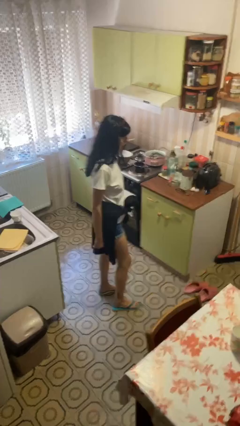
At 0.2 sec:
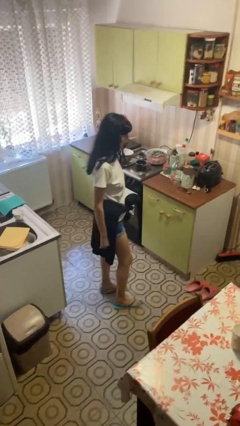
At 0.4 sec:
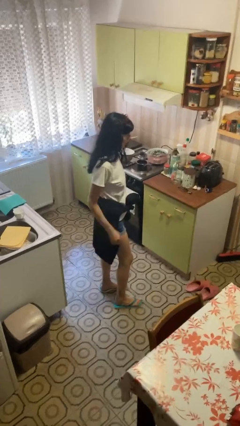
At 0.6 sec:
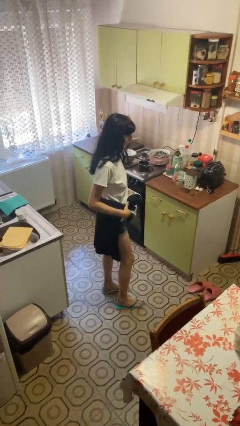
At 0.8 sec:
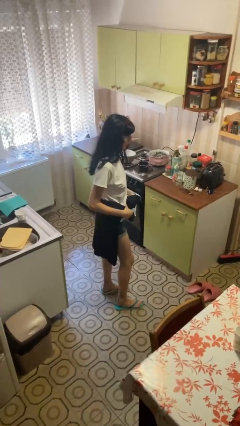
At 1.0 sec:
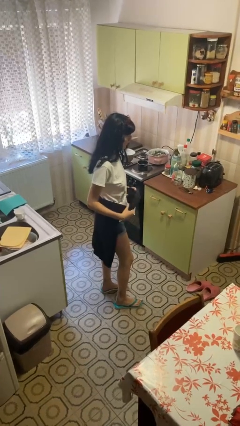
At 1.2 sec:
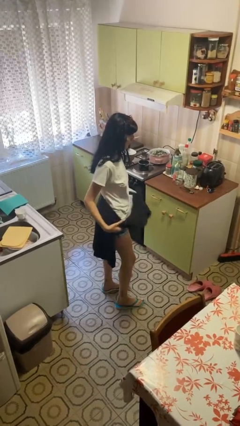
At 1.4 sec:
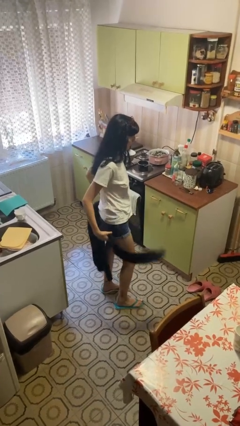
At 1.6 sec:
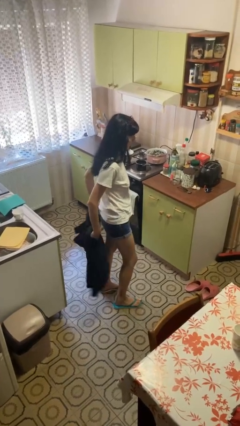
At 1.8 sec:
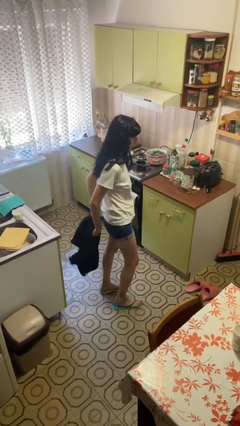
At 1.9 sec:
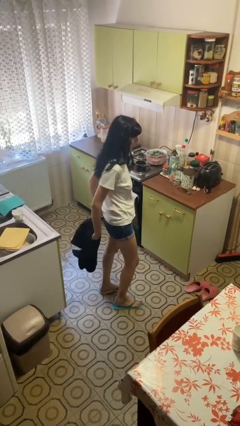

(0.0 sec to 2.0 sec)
person unties jacket around waist

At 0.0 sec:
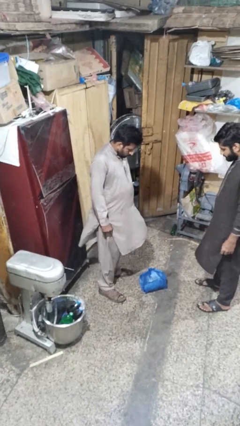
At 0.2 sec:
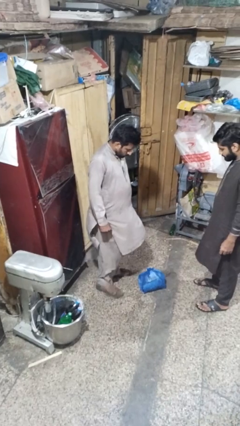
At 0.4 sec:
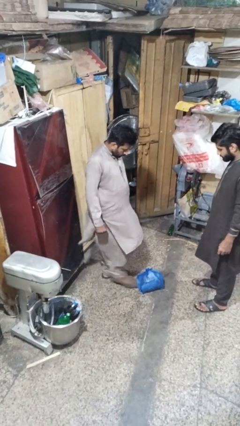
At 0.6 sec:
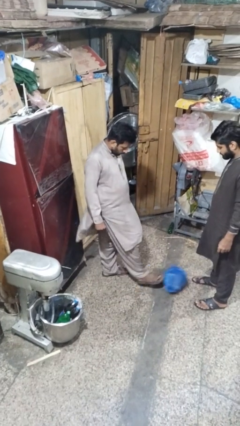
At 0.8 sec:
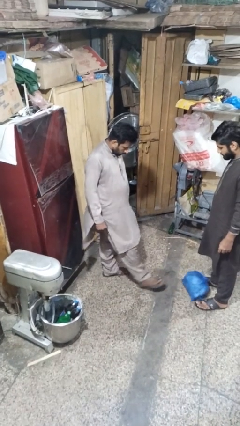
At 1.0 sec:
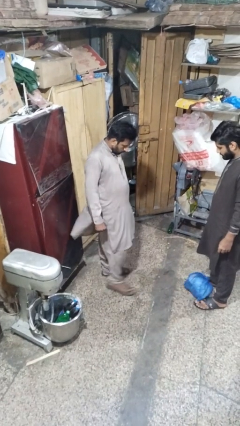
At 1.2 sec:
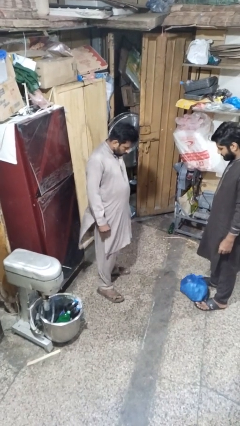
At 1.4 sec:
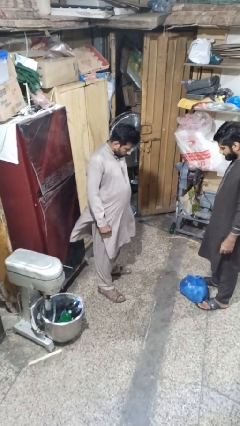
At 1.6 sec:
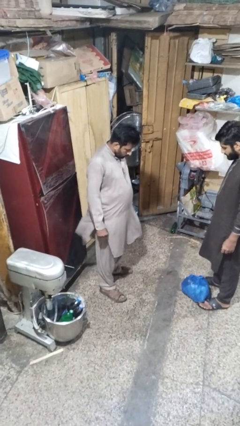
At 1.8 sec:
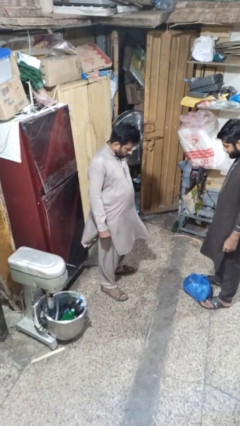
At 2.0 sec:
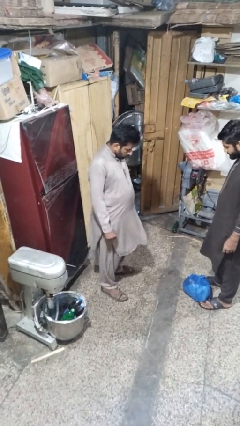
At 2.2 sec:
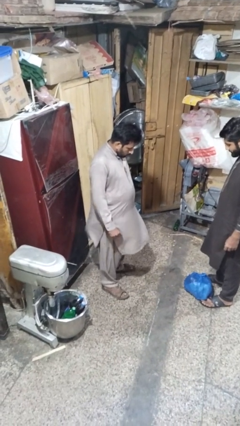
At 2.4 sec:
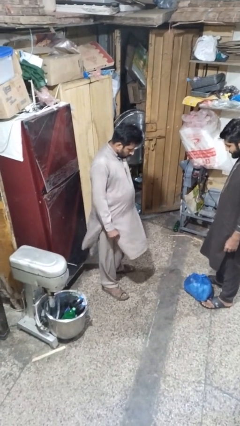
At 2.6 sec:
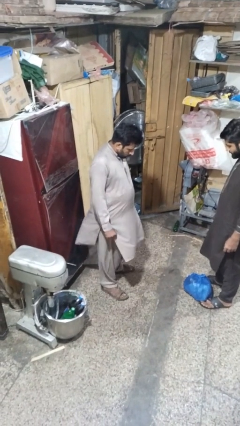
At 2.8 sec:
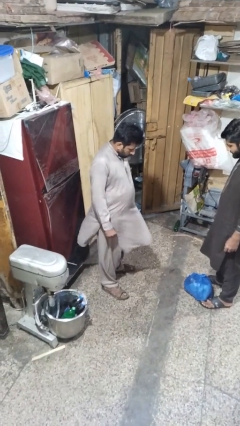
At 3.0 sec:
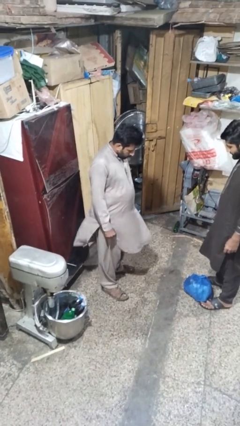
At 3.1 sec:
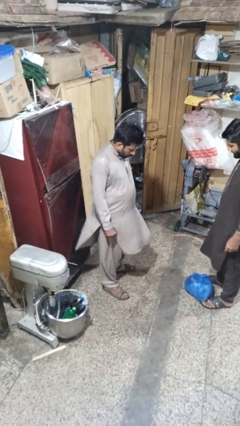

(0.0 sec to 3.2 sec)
person kicks object to person

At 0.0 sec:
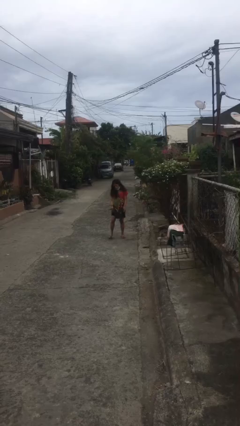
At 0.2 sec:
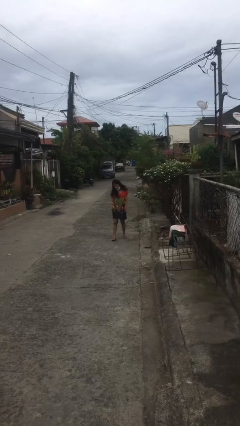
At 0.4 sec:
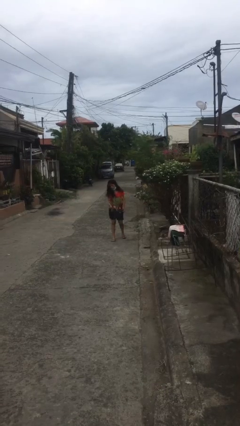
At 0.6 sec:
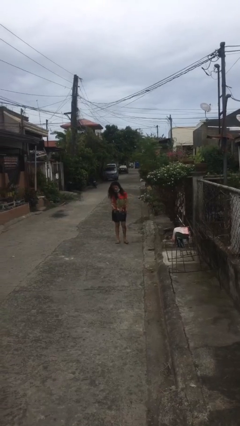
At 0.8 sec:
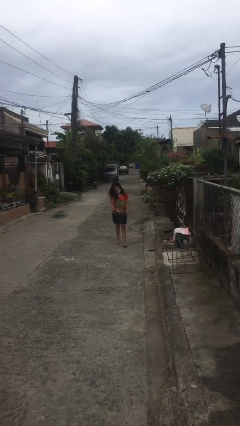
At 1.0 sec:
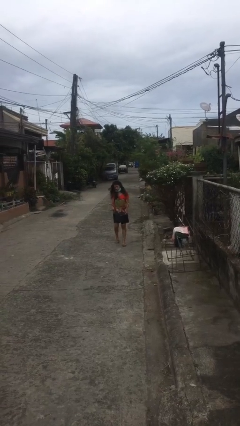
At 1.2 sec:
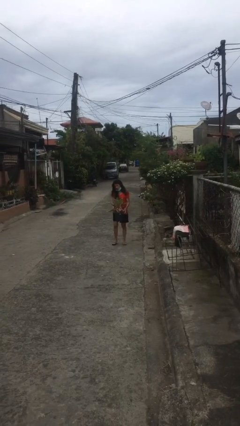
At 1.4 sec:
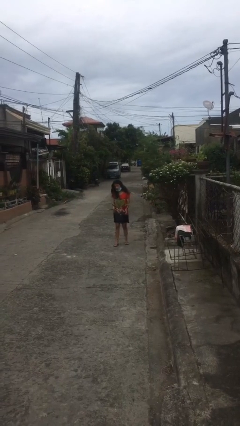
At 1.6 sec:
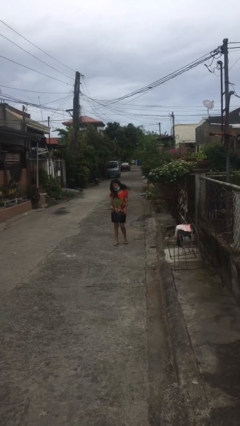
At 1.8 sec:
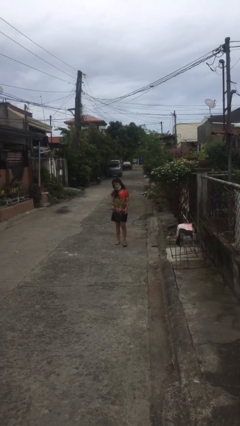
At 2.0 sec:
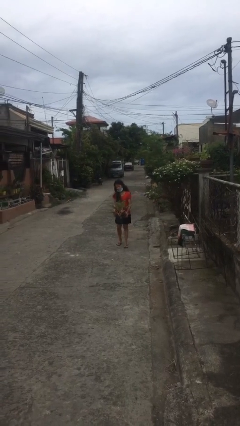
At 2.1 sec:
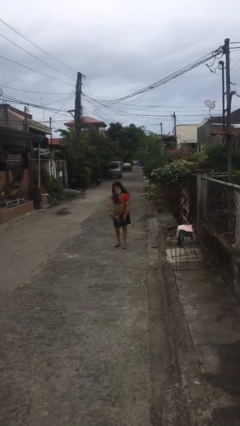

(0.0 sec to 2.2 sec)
person carries heavy object

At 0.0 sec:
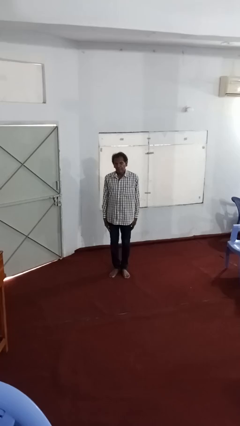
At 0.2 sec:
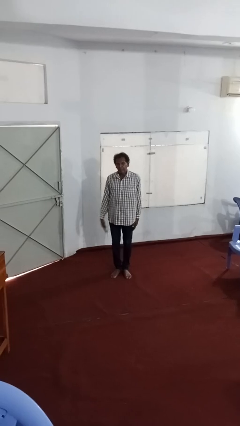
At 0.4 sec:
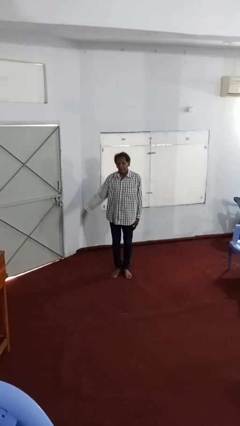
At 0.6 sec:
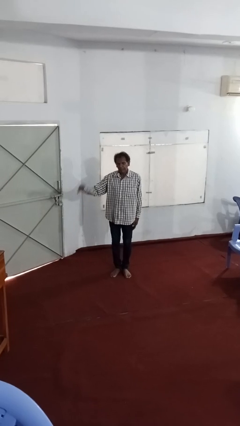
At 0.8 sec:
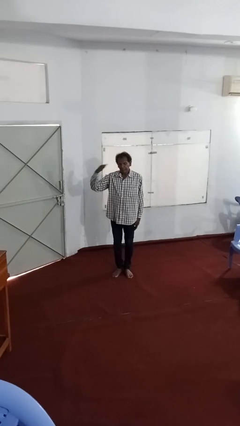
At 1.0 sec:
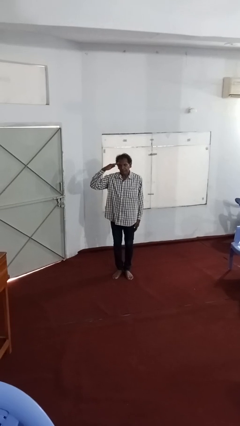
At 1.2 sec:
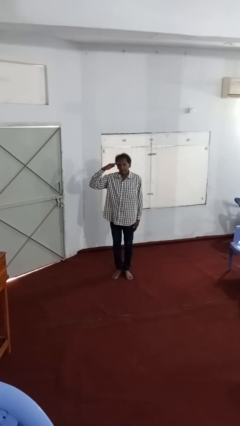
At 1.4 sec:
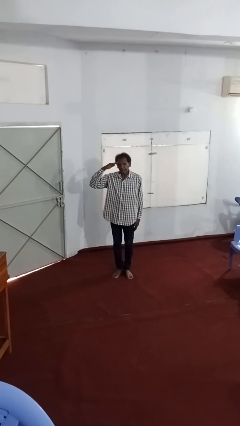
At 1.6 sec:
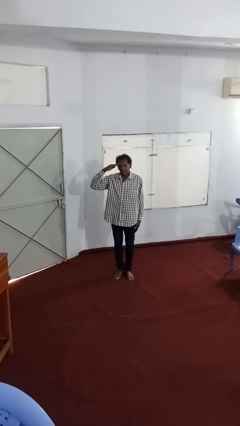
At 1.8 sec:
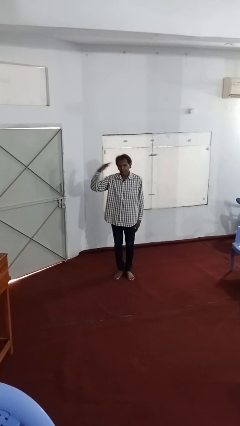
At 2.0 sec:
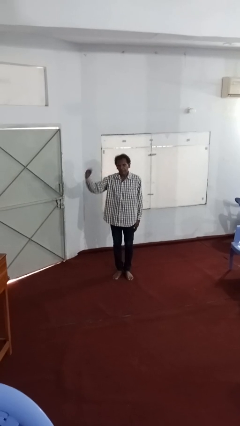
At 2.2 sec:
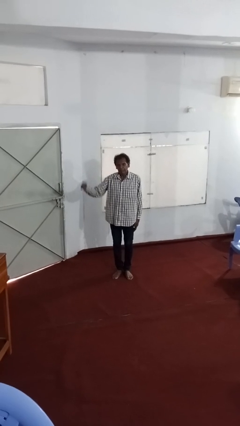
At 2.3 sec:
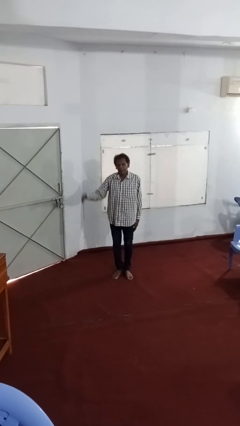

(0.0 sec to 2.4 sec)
person salutes

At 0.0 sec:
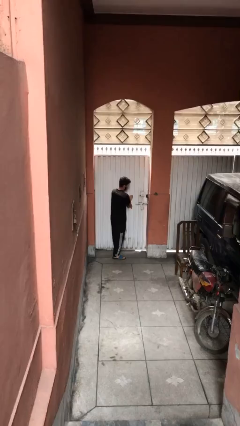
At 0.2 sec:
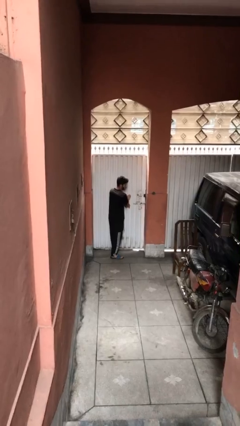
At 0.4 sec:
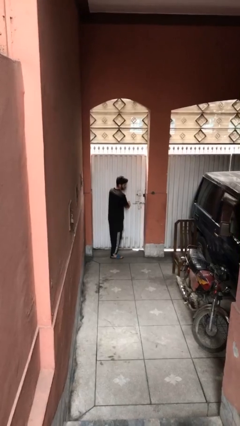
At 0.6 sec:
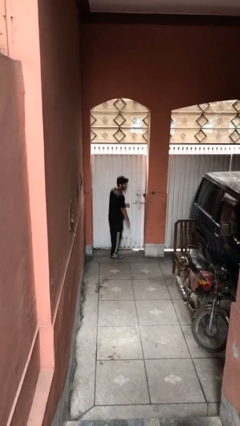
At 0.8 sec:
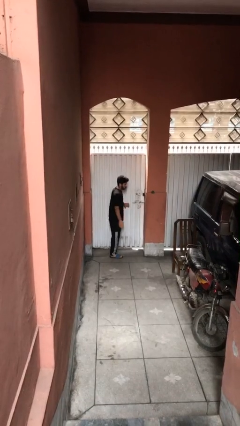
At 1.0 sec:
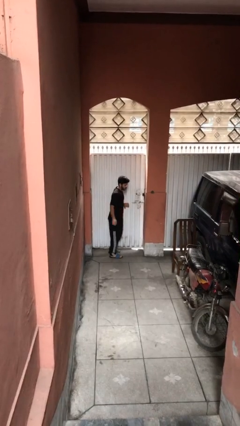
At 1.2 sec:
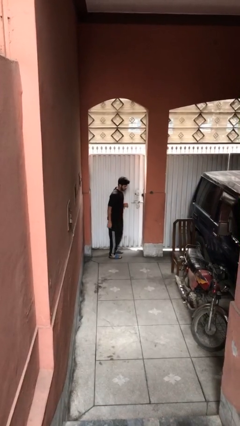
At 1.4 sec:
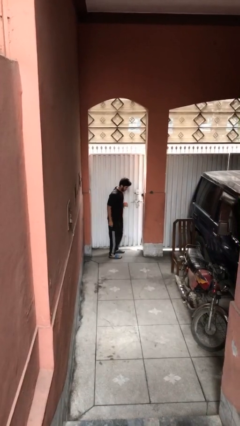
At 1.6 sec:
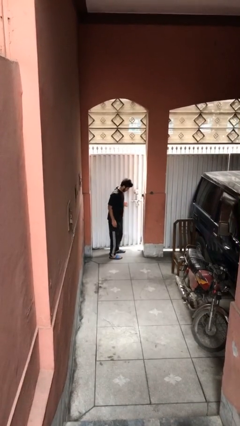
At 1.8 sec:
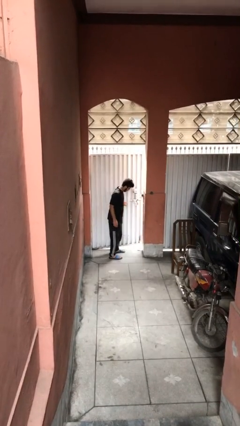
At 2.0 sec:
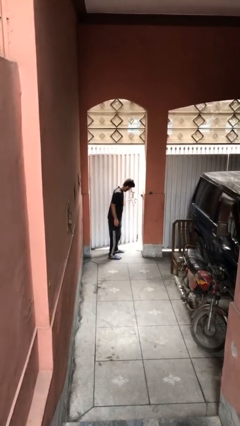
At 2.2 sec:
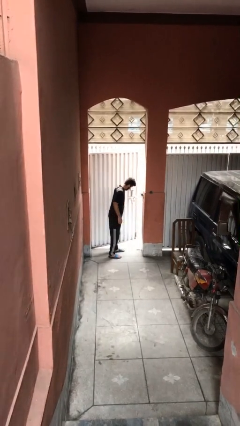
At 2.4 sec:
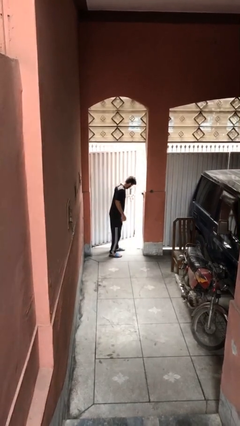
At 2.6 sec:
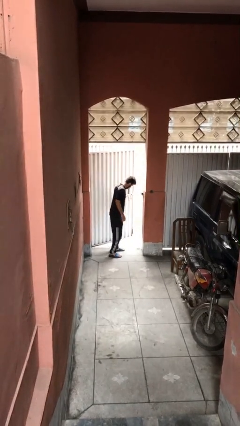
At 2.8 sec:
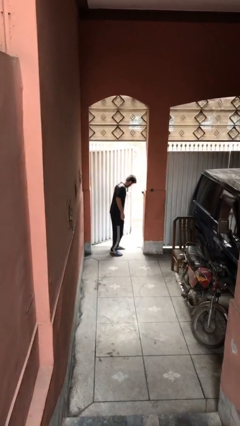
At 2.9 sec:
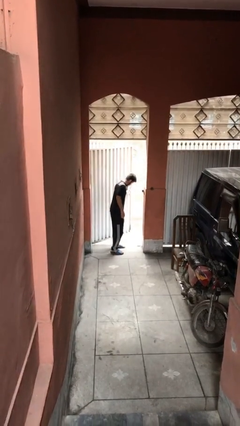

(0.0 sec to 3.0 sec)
person opens facility door

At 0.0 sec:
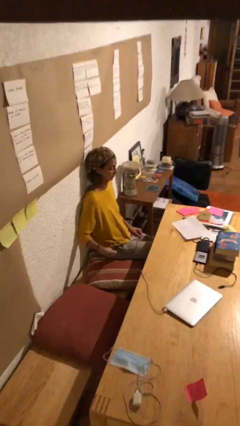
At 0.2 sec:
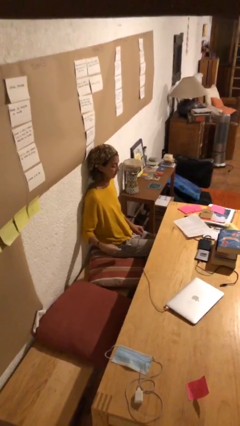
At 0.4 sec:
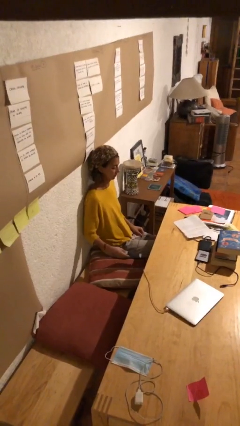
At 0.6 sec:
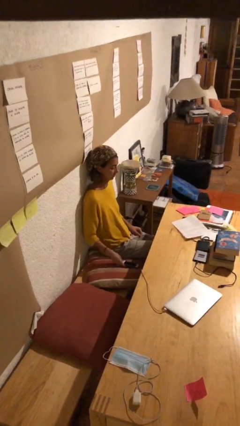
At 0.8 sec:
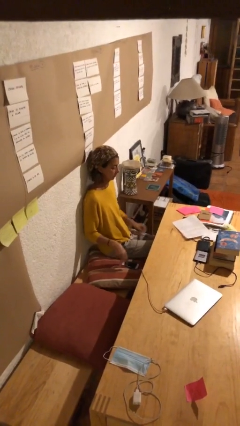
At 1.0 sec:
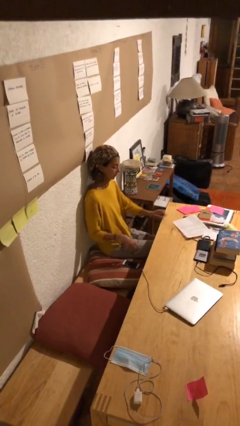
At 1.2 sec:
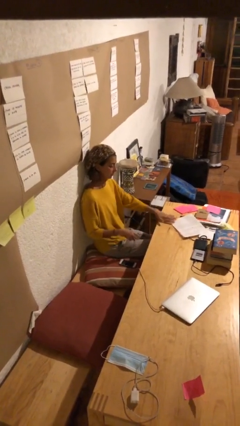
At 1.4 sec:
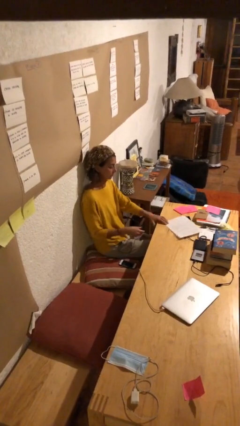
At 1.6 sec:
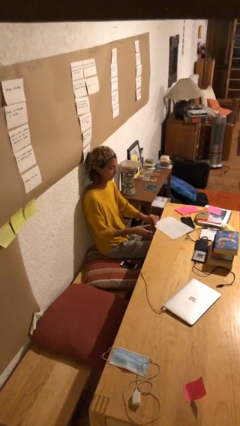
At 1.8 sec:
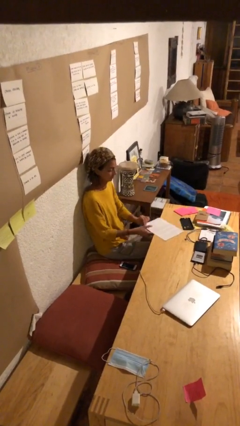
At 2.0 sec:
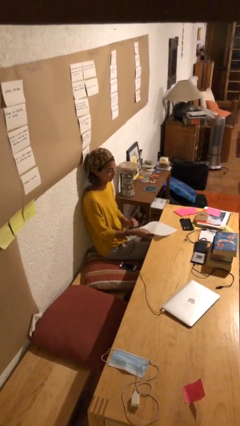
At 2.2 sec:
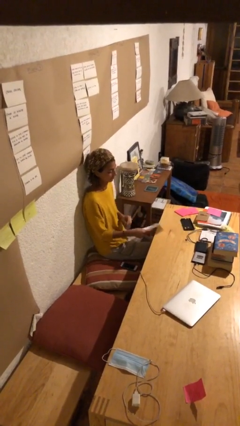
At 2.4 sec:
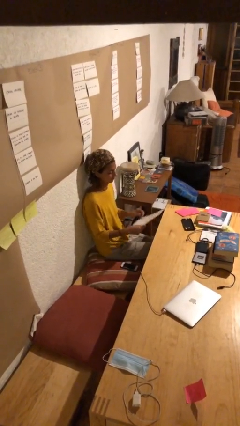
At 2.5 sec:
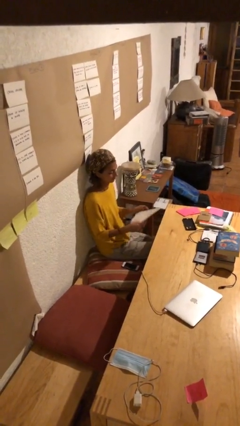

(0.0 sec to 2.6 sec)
person picks up object from table

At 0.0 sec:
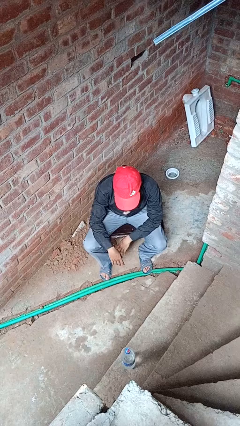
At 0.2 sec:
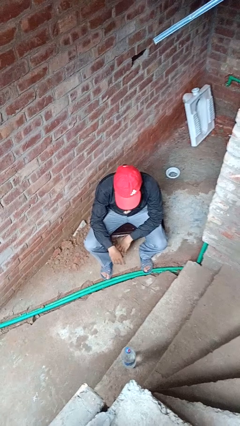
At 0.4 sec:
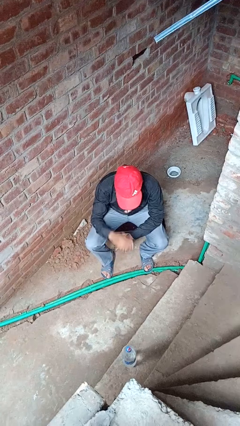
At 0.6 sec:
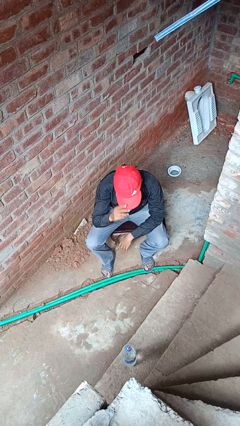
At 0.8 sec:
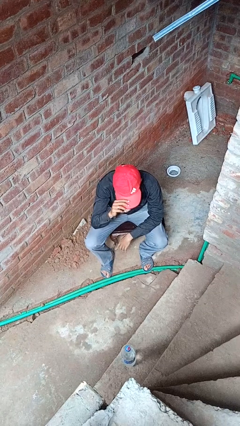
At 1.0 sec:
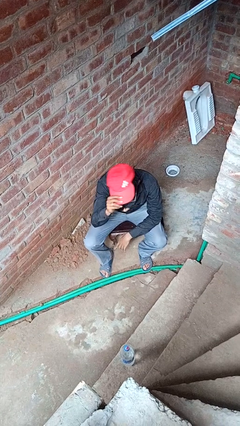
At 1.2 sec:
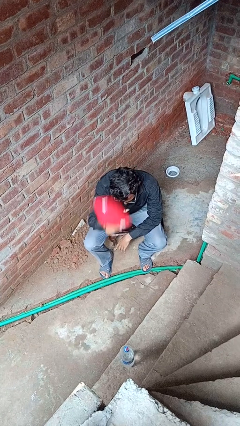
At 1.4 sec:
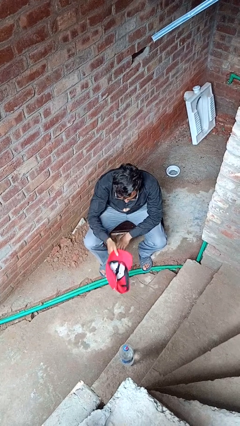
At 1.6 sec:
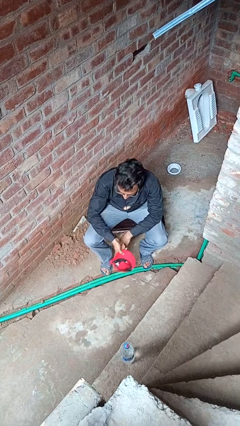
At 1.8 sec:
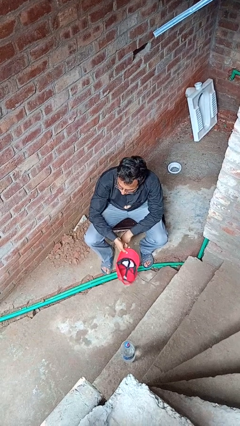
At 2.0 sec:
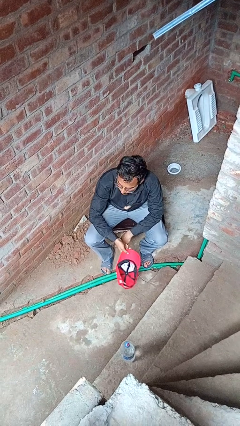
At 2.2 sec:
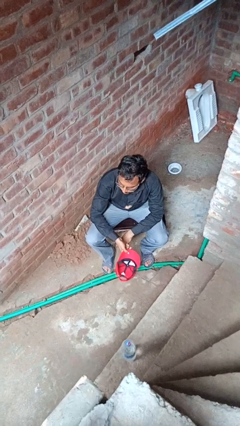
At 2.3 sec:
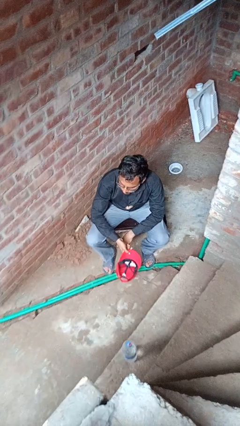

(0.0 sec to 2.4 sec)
person takes off hat
